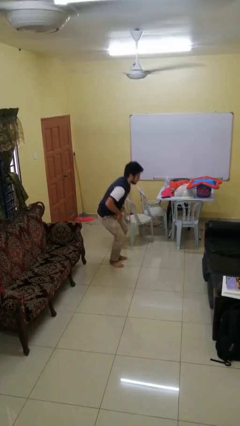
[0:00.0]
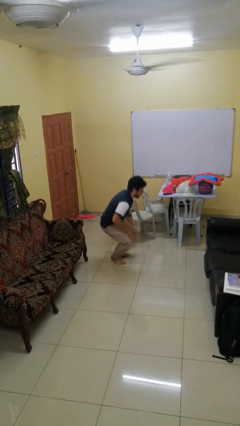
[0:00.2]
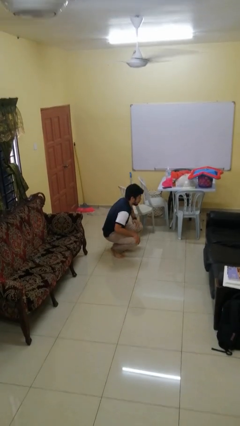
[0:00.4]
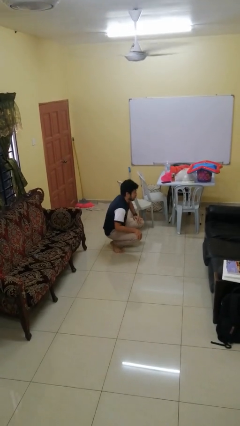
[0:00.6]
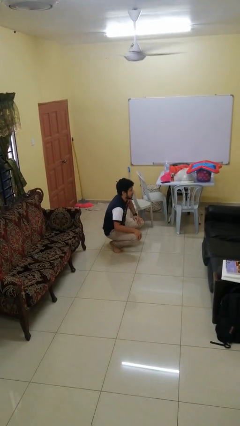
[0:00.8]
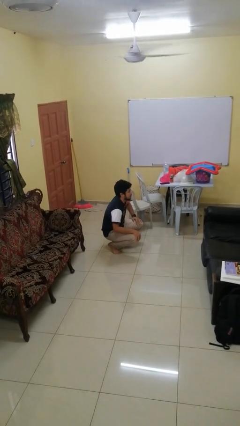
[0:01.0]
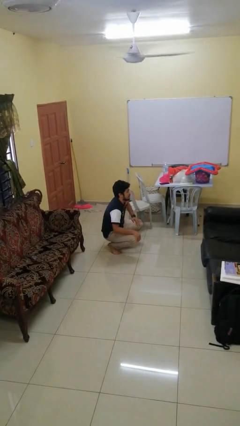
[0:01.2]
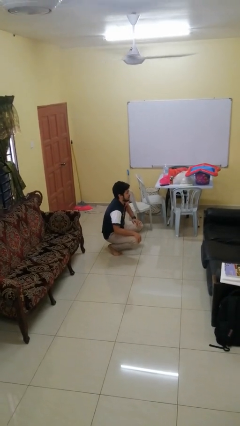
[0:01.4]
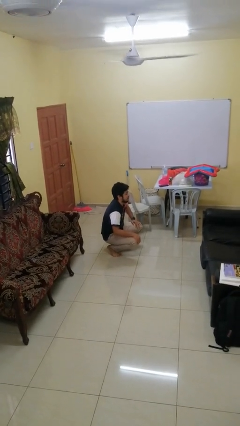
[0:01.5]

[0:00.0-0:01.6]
person squats

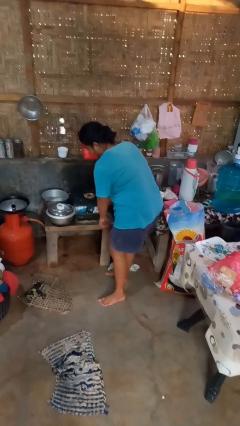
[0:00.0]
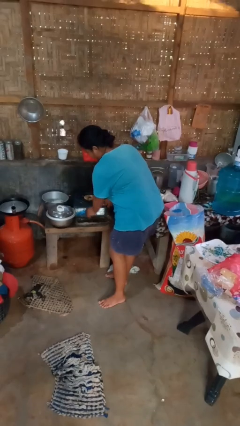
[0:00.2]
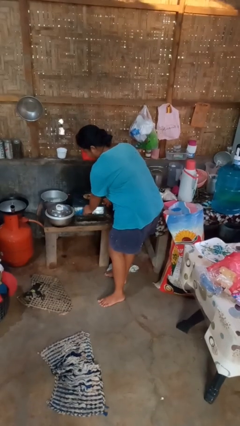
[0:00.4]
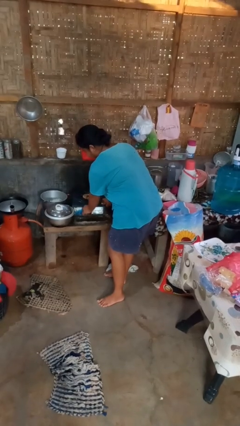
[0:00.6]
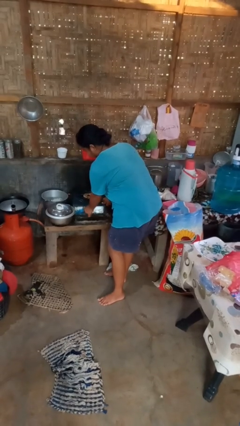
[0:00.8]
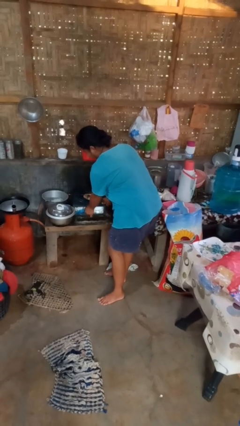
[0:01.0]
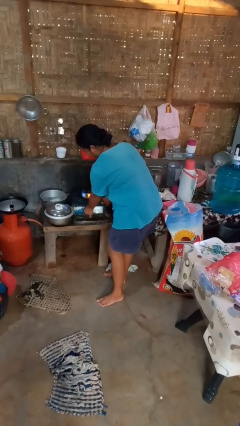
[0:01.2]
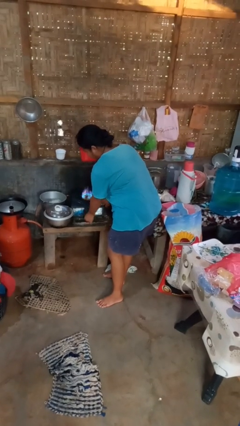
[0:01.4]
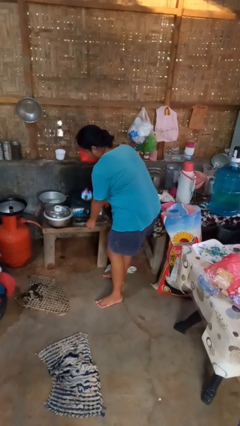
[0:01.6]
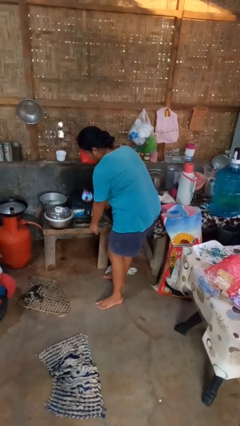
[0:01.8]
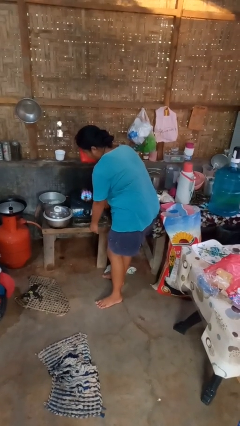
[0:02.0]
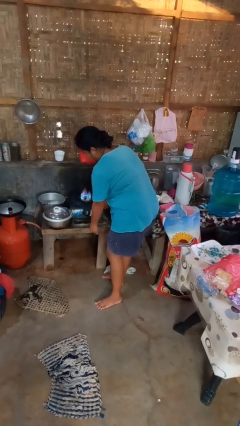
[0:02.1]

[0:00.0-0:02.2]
person turns on stovetop

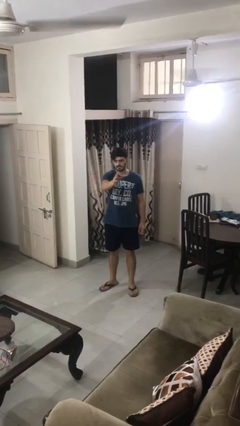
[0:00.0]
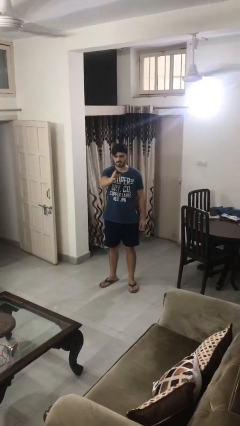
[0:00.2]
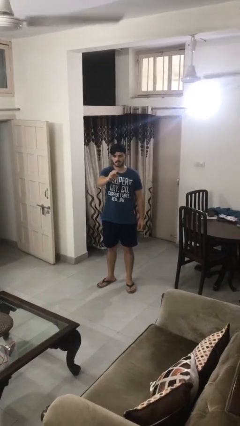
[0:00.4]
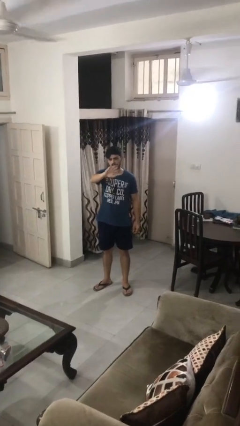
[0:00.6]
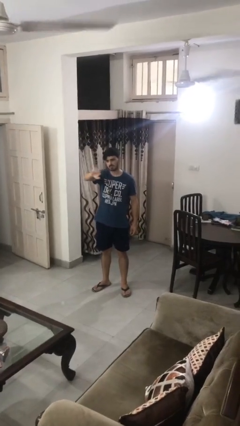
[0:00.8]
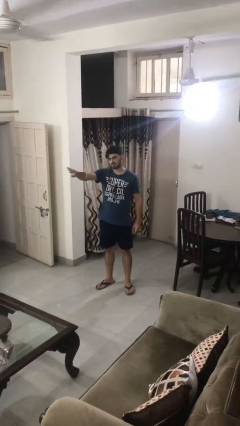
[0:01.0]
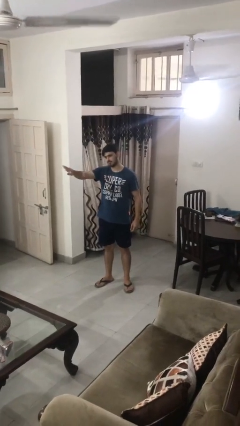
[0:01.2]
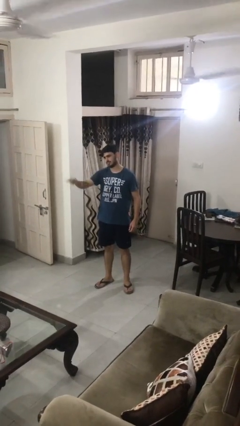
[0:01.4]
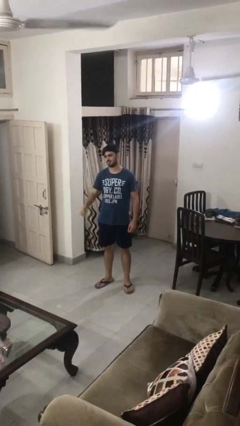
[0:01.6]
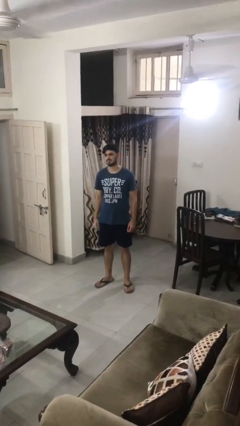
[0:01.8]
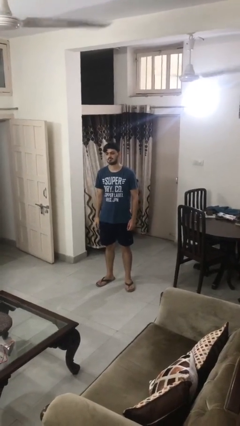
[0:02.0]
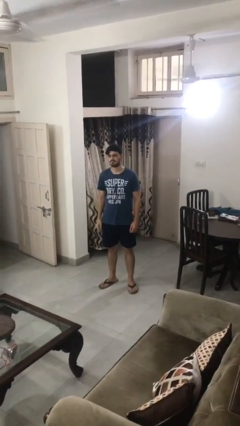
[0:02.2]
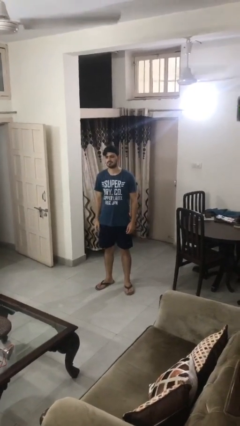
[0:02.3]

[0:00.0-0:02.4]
person gestures swipe right

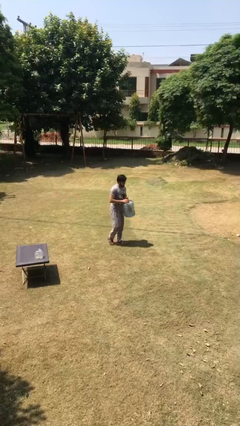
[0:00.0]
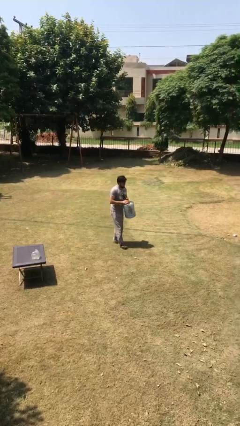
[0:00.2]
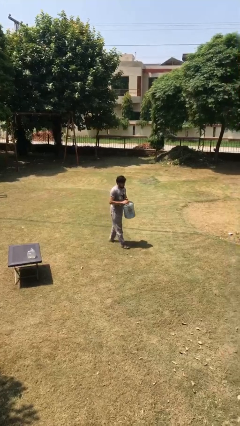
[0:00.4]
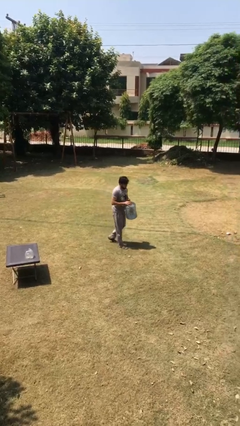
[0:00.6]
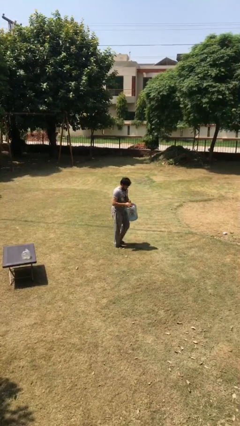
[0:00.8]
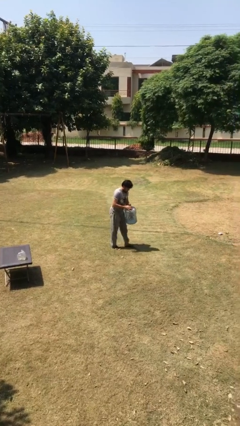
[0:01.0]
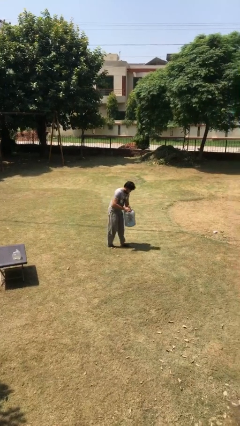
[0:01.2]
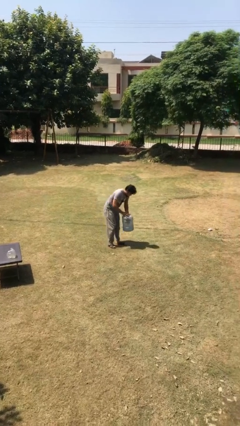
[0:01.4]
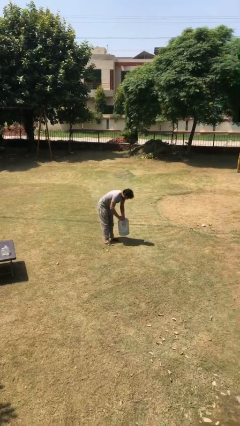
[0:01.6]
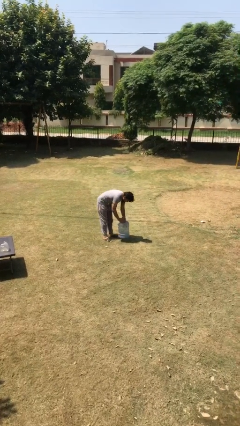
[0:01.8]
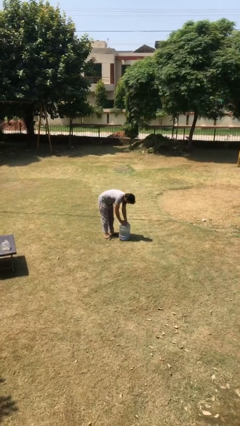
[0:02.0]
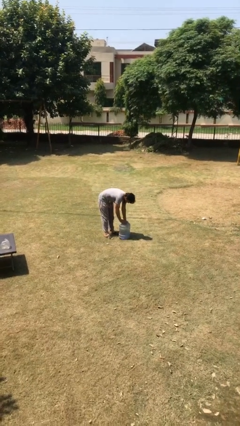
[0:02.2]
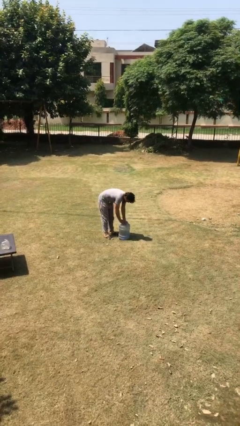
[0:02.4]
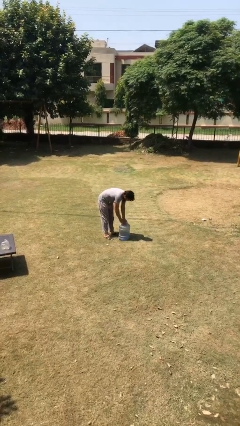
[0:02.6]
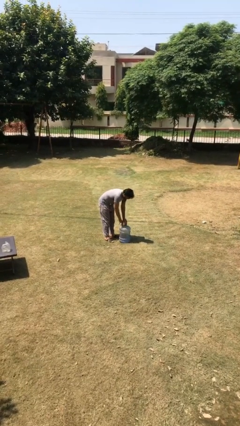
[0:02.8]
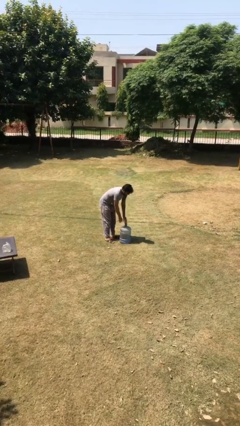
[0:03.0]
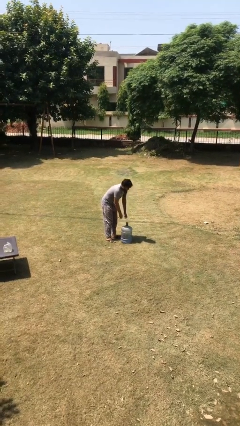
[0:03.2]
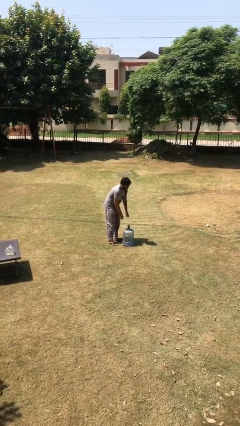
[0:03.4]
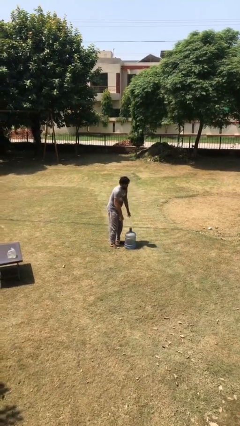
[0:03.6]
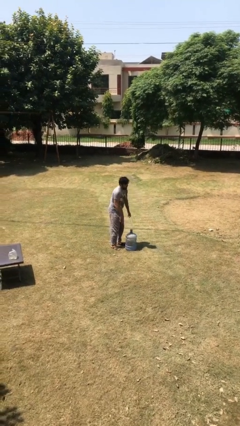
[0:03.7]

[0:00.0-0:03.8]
person puts down object on floor

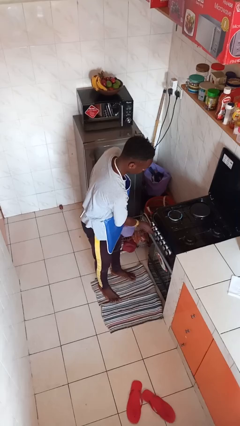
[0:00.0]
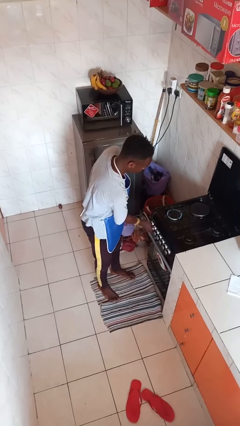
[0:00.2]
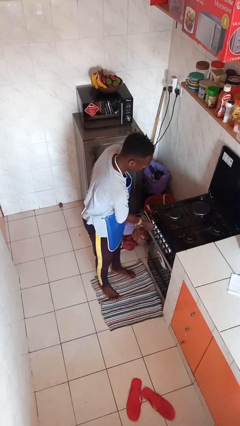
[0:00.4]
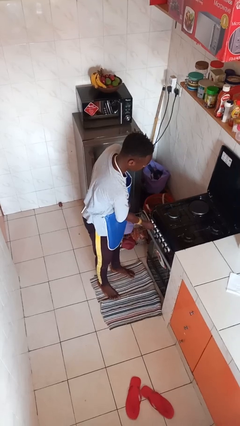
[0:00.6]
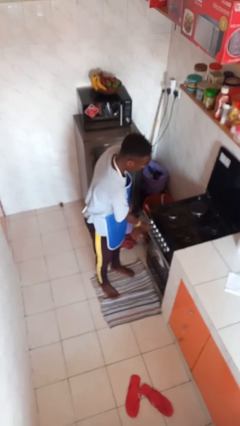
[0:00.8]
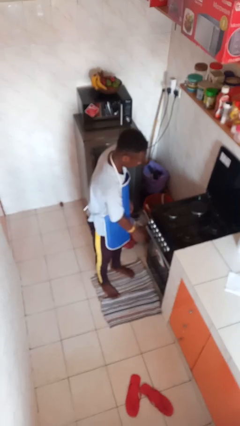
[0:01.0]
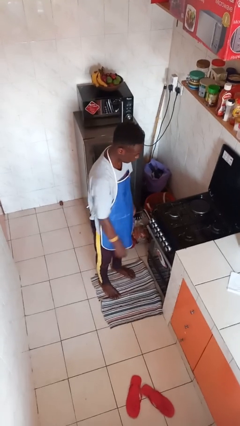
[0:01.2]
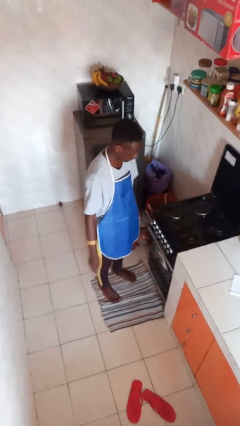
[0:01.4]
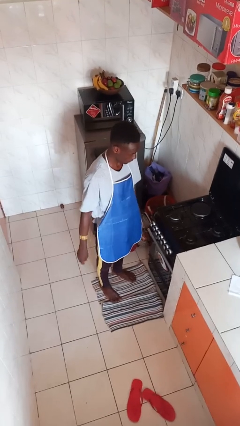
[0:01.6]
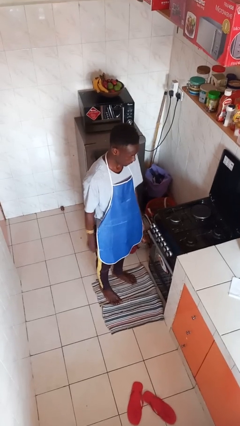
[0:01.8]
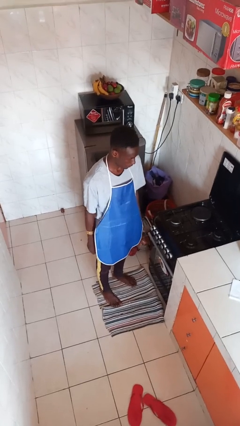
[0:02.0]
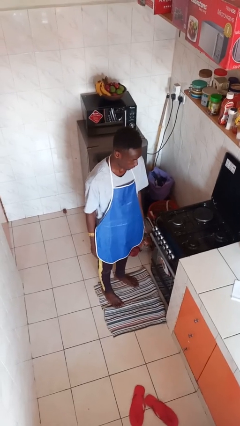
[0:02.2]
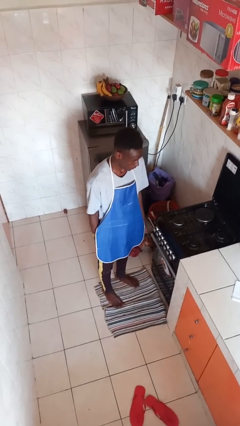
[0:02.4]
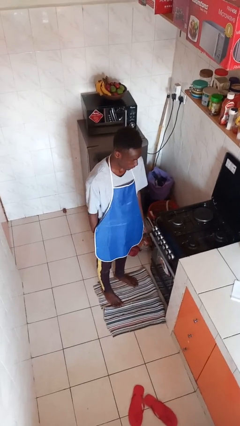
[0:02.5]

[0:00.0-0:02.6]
person turns off stovetop

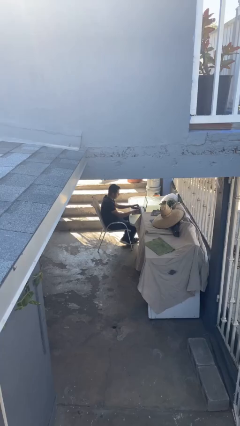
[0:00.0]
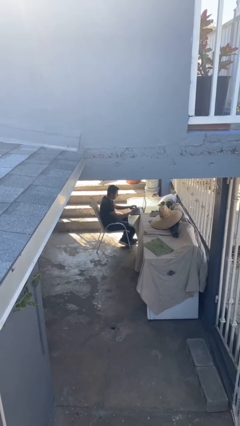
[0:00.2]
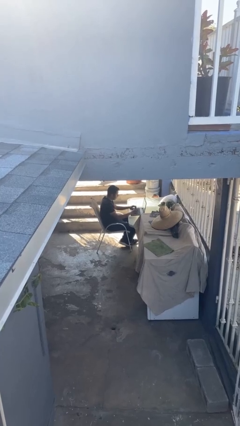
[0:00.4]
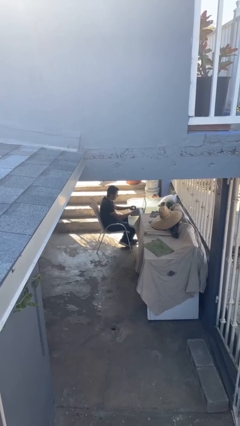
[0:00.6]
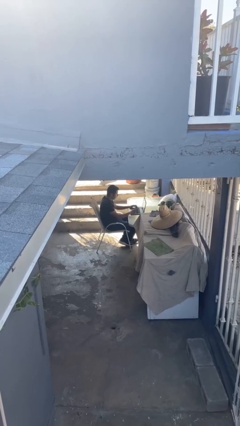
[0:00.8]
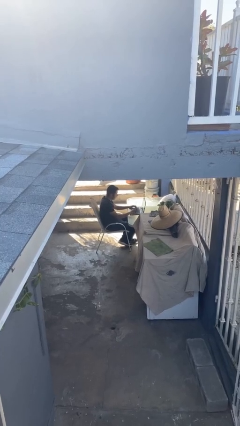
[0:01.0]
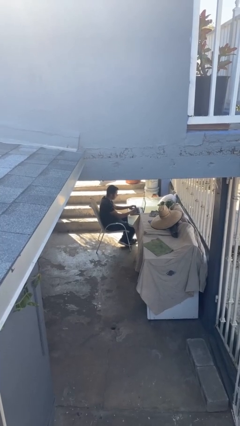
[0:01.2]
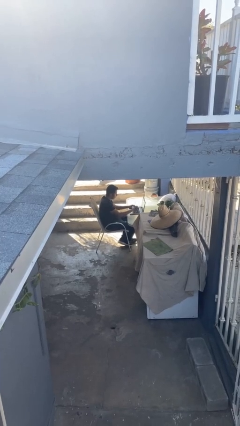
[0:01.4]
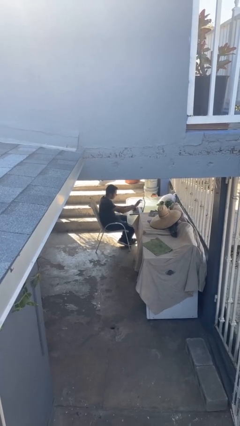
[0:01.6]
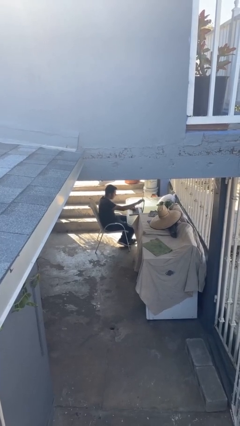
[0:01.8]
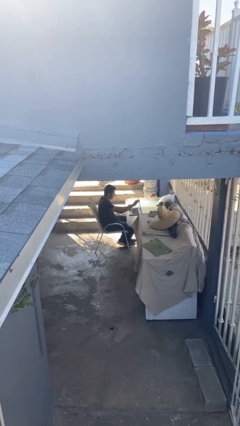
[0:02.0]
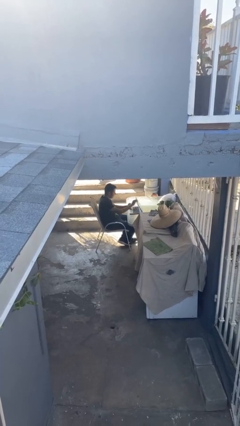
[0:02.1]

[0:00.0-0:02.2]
person interacts with laptop

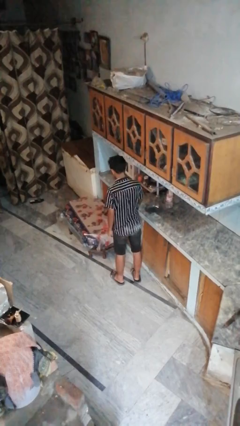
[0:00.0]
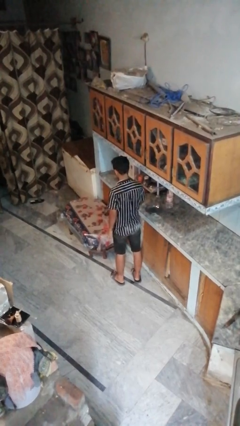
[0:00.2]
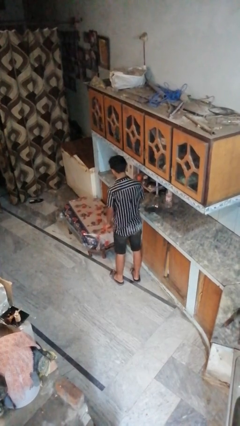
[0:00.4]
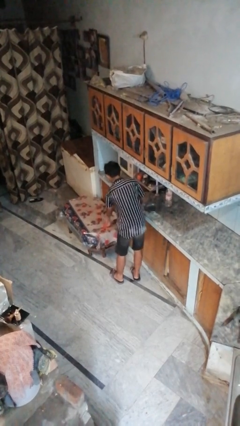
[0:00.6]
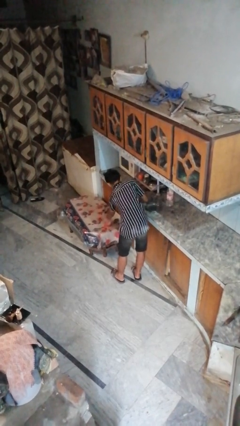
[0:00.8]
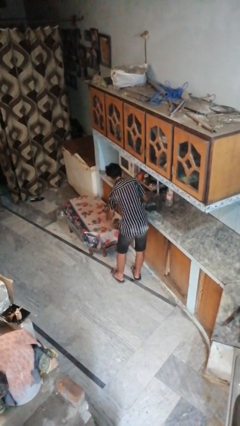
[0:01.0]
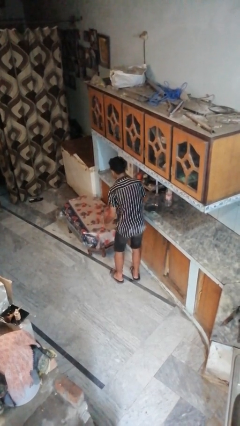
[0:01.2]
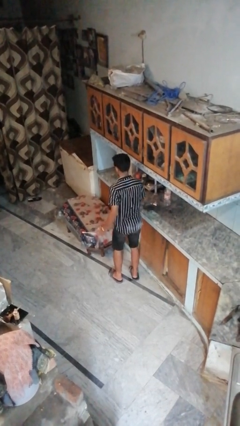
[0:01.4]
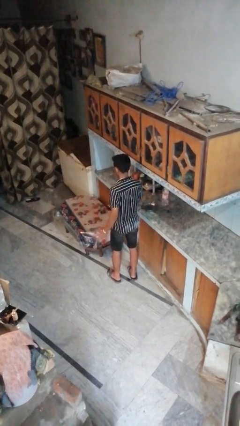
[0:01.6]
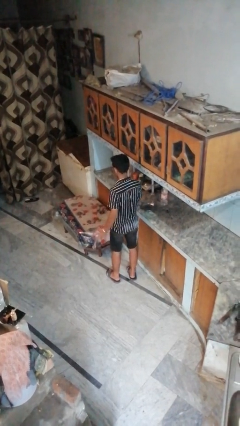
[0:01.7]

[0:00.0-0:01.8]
person picks up object from table

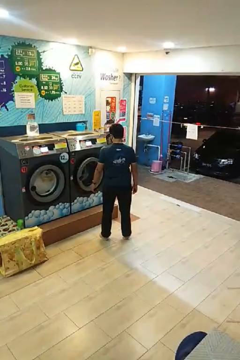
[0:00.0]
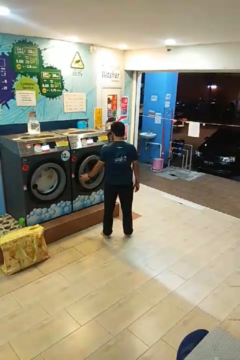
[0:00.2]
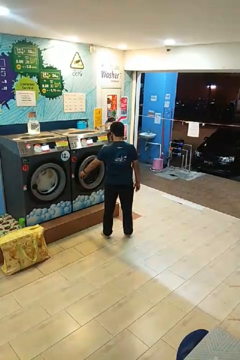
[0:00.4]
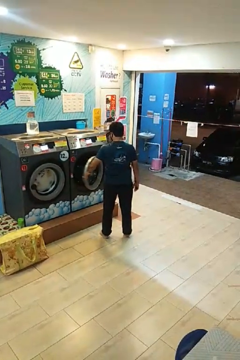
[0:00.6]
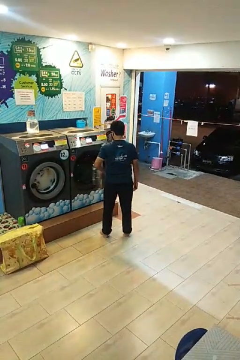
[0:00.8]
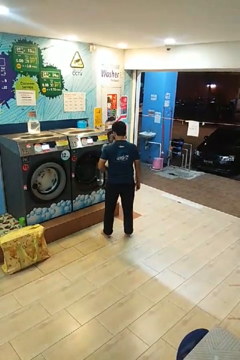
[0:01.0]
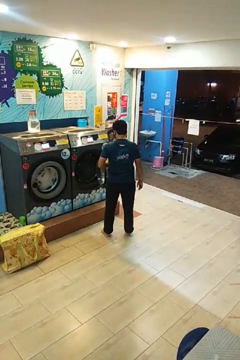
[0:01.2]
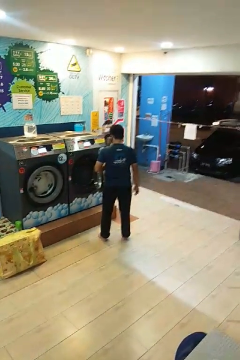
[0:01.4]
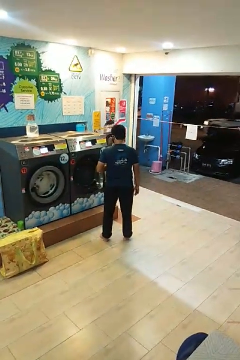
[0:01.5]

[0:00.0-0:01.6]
person opens clothes washer
